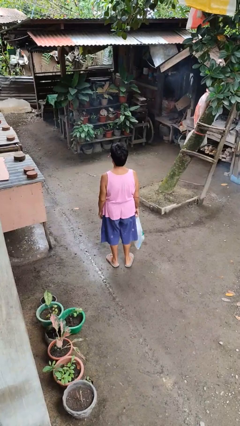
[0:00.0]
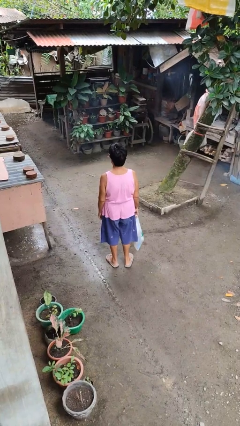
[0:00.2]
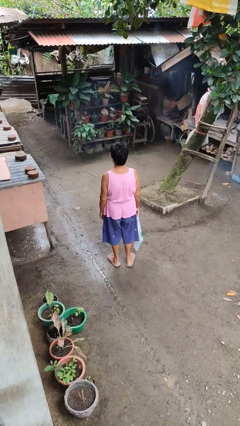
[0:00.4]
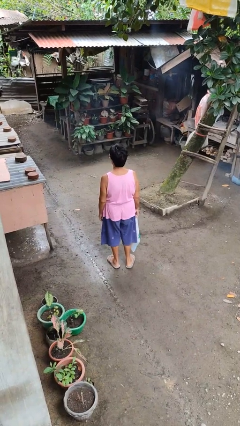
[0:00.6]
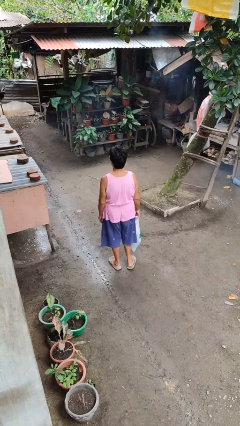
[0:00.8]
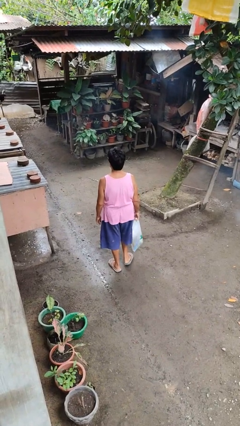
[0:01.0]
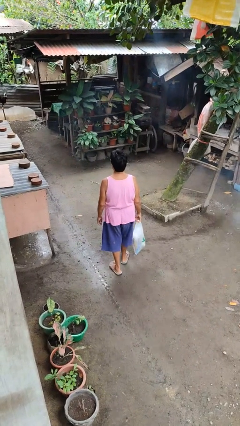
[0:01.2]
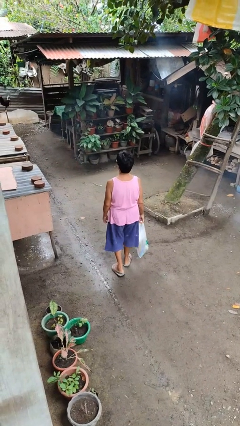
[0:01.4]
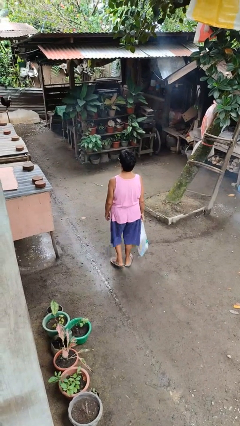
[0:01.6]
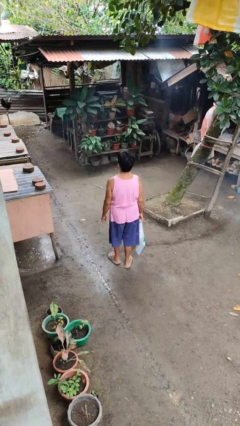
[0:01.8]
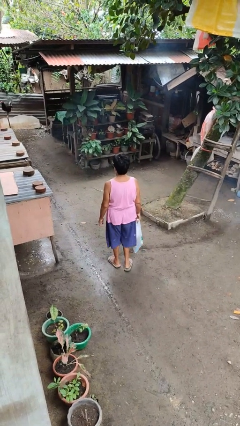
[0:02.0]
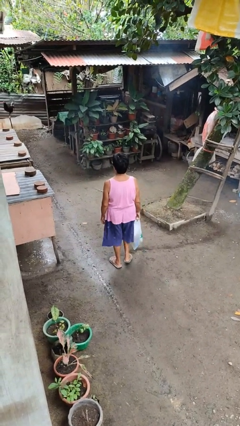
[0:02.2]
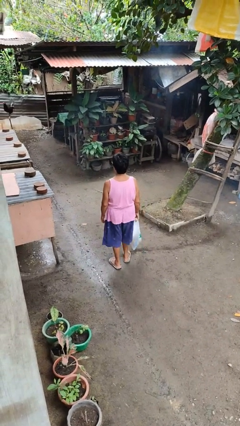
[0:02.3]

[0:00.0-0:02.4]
person carries groceries

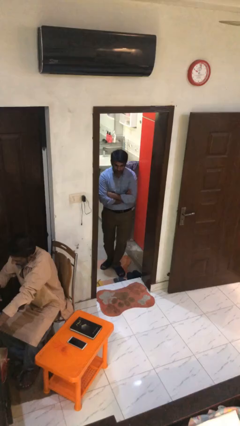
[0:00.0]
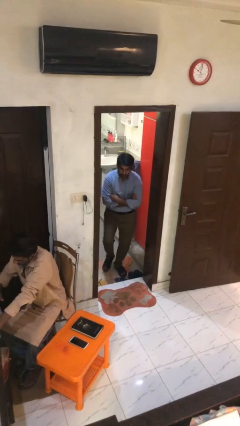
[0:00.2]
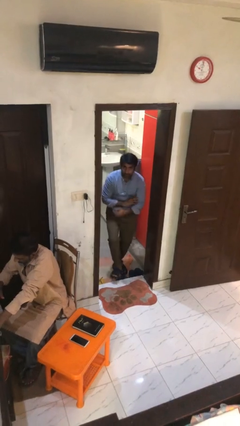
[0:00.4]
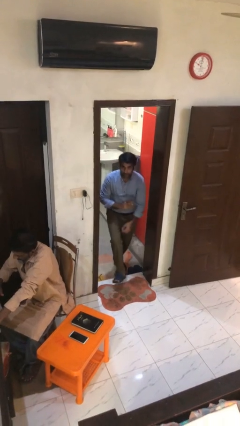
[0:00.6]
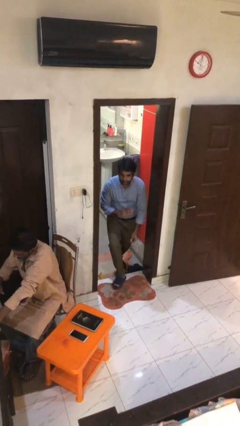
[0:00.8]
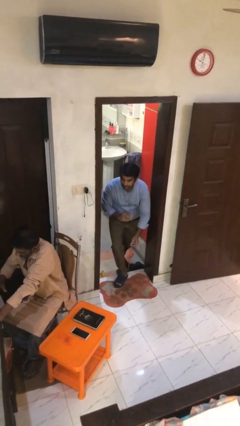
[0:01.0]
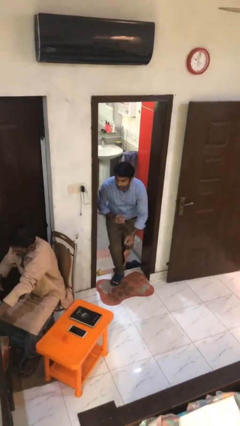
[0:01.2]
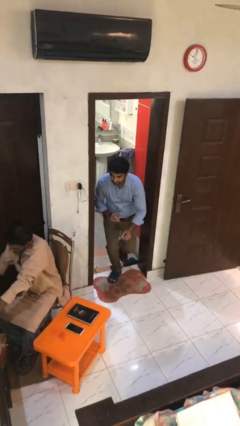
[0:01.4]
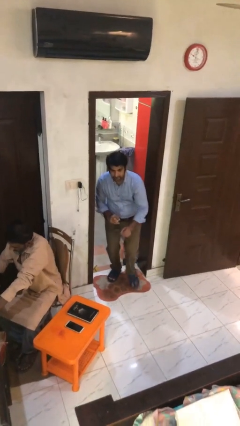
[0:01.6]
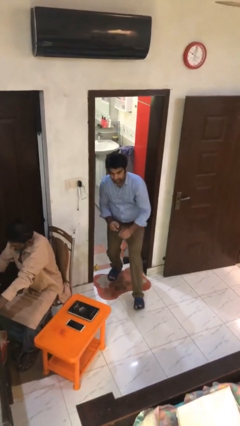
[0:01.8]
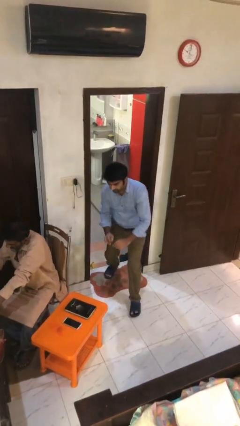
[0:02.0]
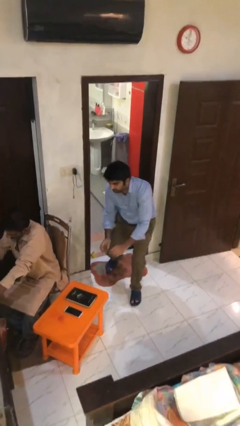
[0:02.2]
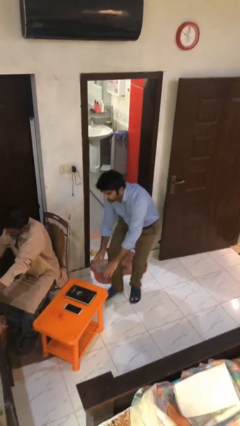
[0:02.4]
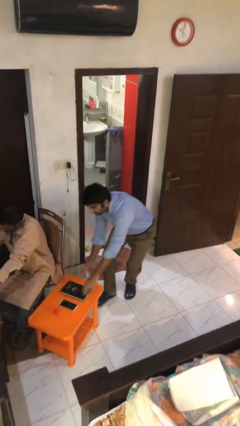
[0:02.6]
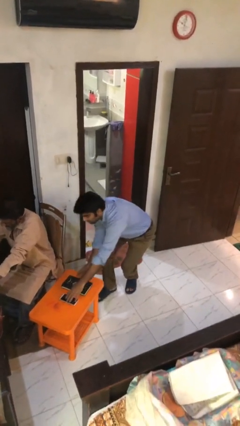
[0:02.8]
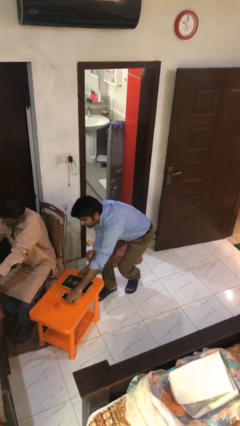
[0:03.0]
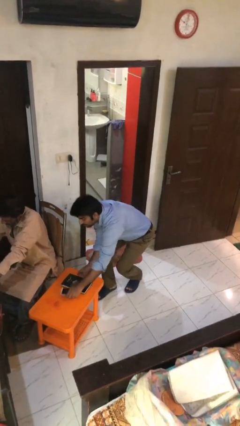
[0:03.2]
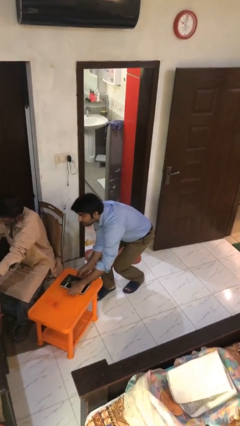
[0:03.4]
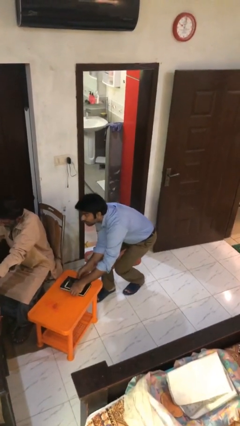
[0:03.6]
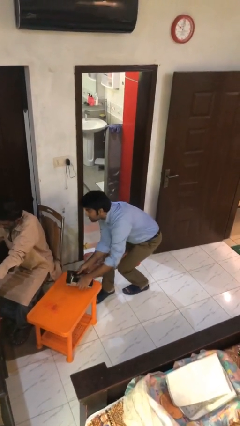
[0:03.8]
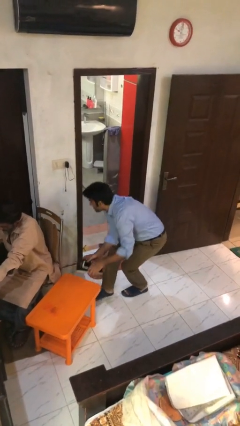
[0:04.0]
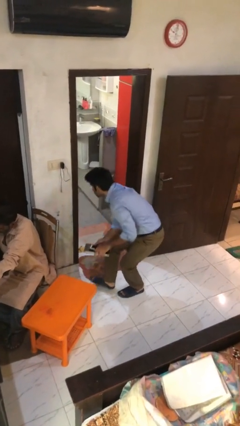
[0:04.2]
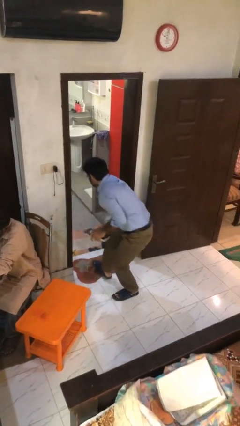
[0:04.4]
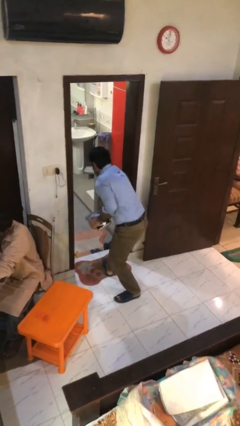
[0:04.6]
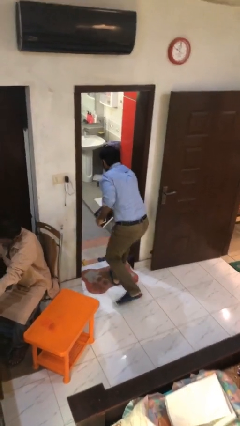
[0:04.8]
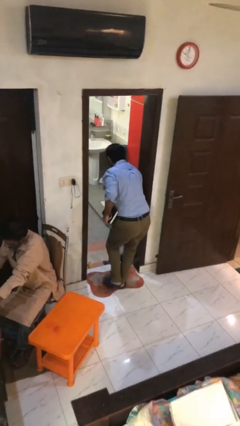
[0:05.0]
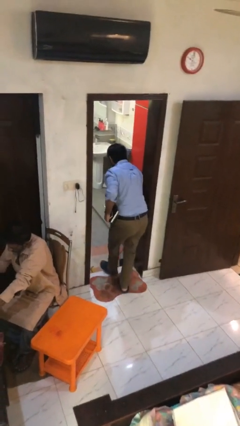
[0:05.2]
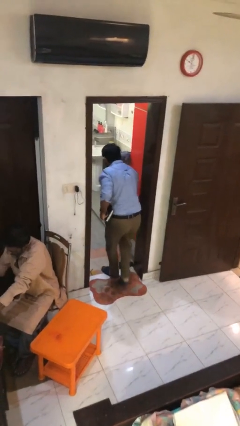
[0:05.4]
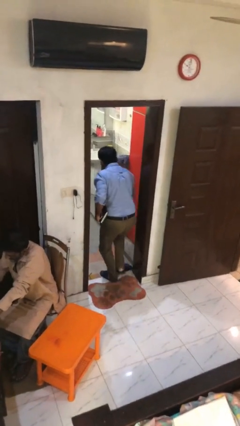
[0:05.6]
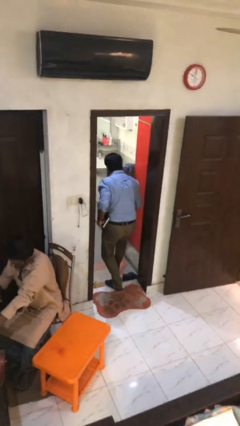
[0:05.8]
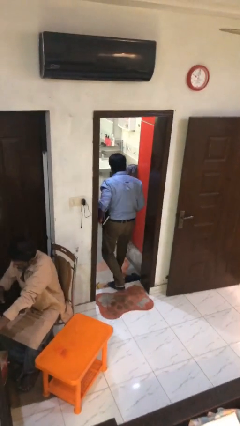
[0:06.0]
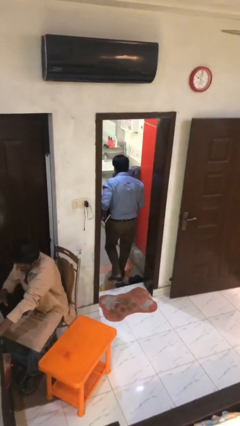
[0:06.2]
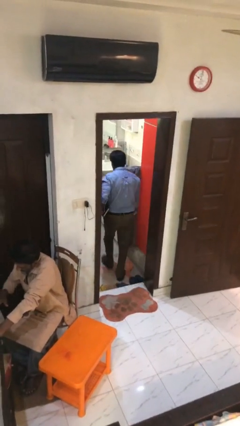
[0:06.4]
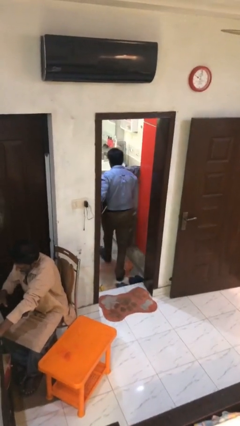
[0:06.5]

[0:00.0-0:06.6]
person steals object from person

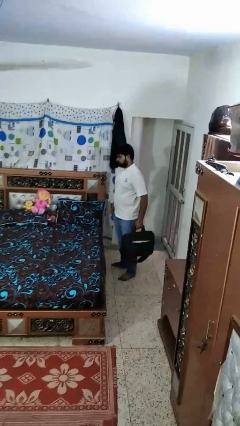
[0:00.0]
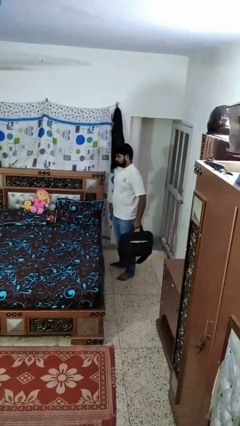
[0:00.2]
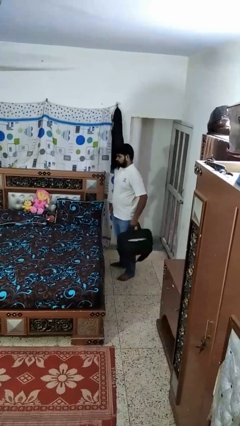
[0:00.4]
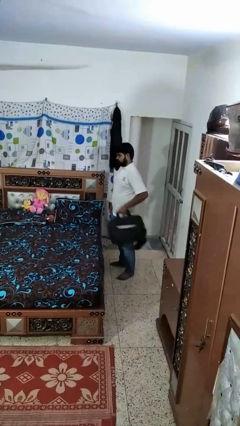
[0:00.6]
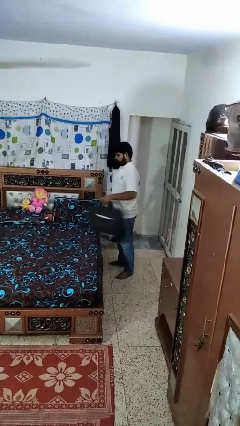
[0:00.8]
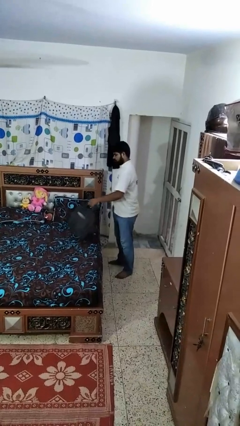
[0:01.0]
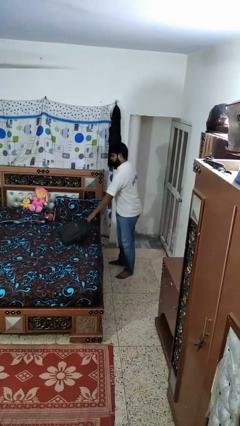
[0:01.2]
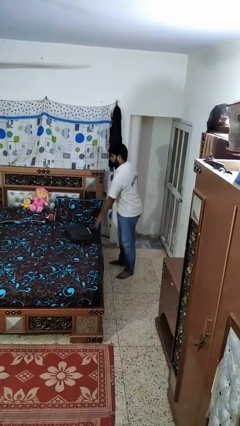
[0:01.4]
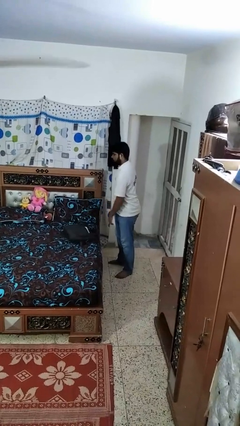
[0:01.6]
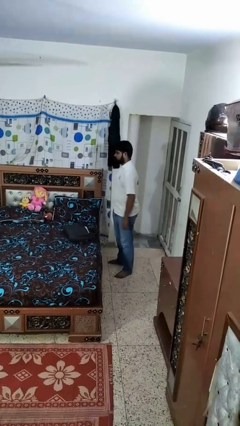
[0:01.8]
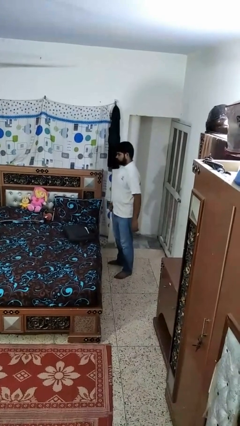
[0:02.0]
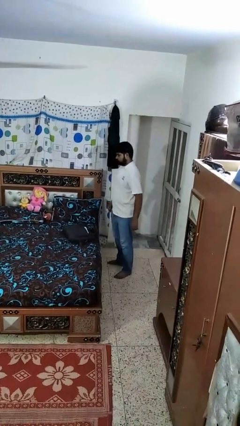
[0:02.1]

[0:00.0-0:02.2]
person puts down object on bed

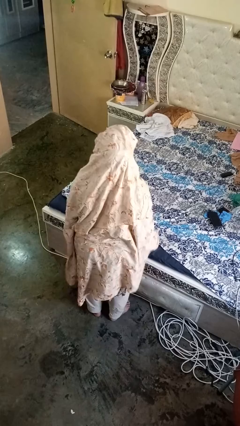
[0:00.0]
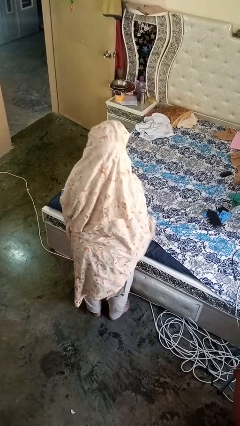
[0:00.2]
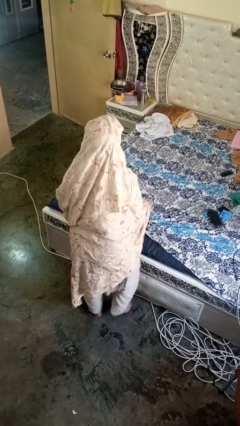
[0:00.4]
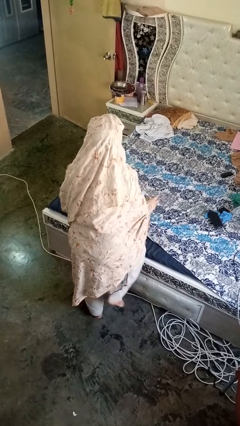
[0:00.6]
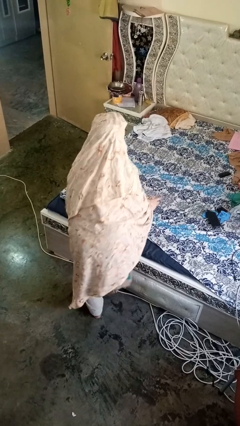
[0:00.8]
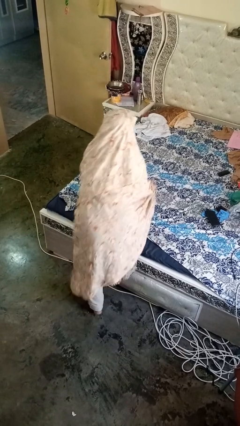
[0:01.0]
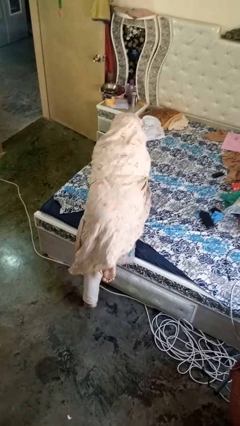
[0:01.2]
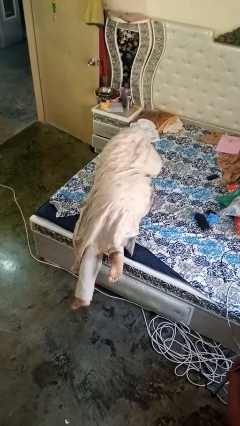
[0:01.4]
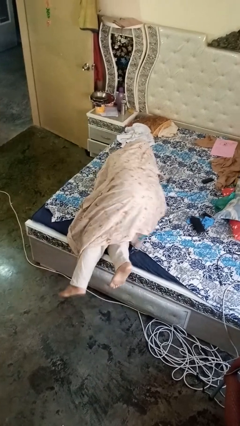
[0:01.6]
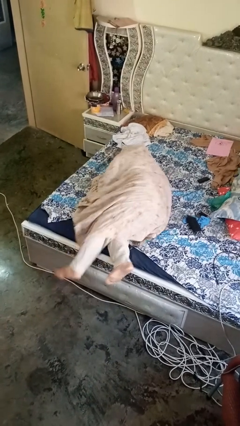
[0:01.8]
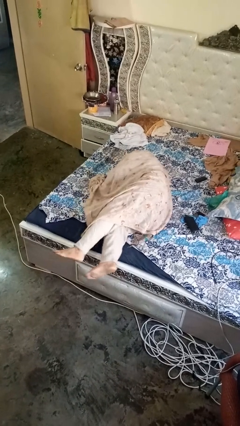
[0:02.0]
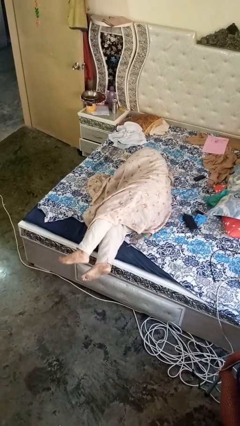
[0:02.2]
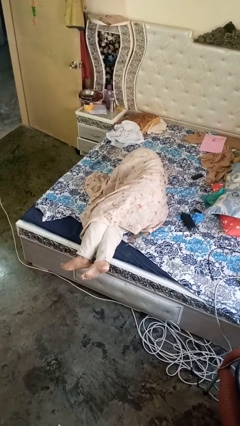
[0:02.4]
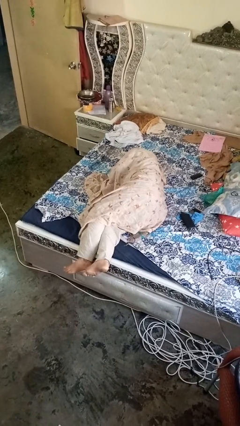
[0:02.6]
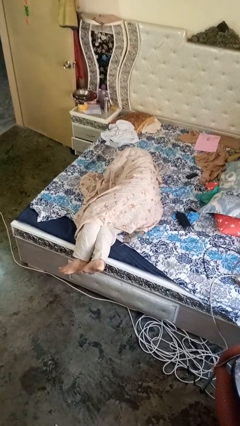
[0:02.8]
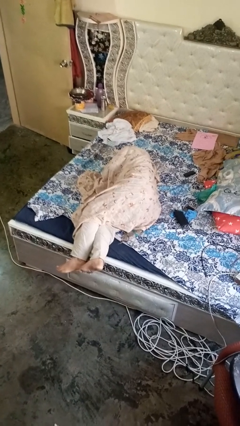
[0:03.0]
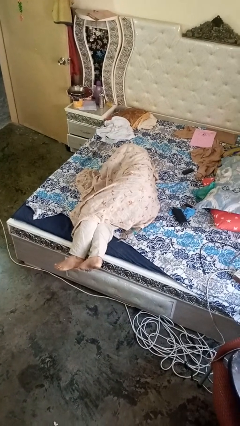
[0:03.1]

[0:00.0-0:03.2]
person lies down on bed

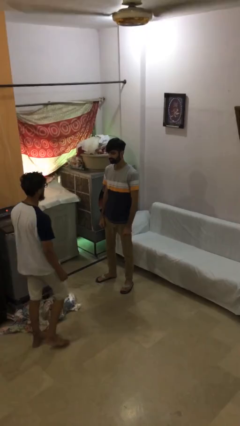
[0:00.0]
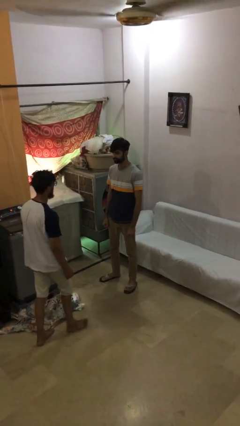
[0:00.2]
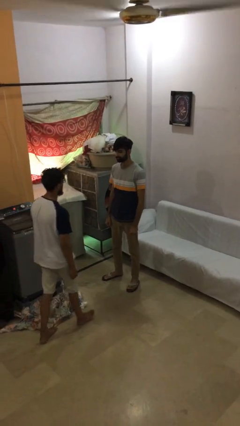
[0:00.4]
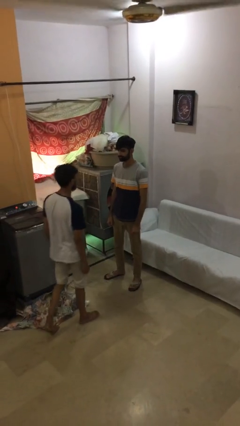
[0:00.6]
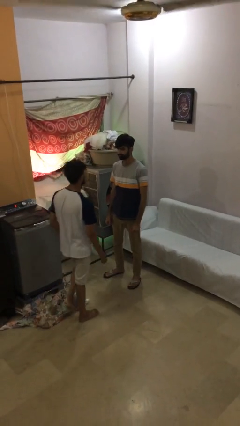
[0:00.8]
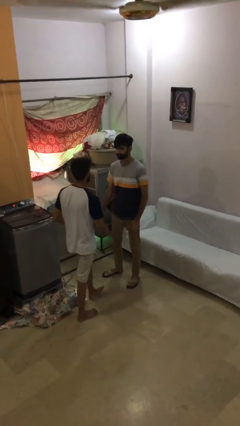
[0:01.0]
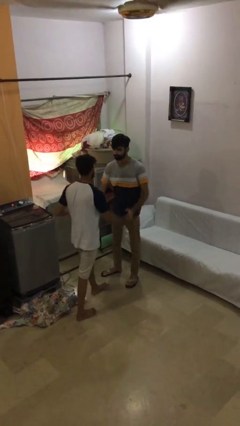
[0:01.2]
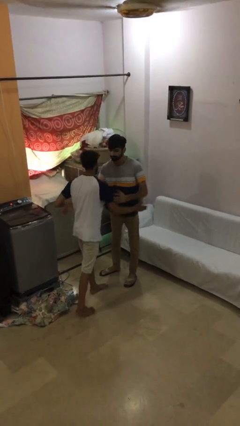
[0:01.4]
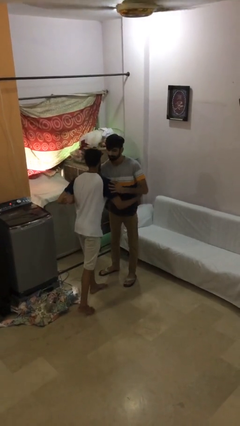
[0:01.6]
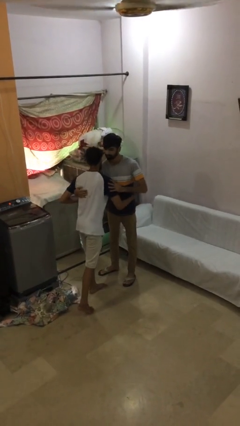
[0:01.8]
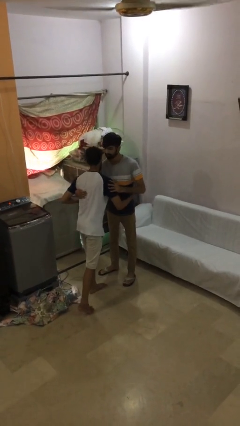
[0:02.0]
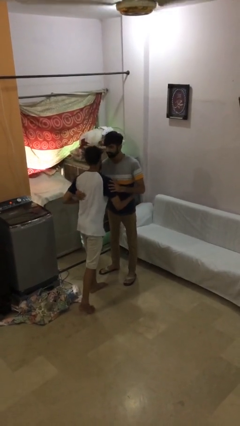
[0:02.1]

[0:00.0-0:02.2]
person embraces person

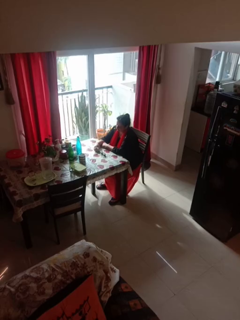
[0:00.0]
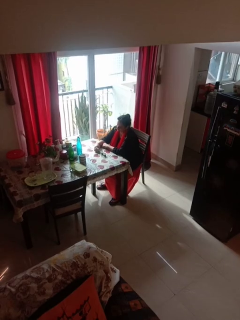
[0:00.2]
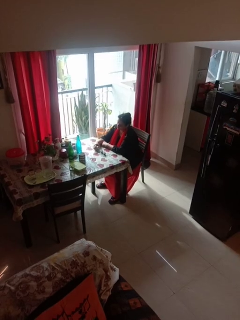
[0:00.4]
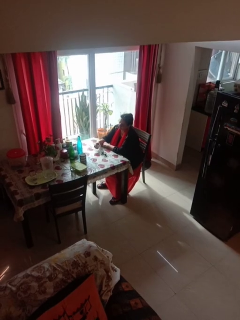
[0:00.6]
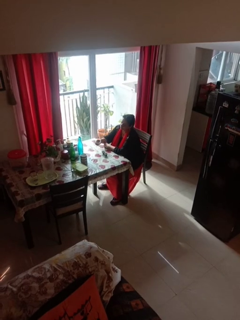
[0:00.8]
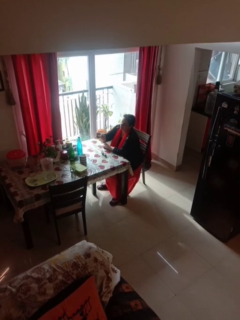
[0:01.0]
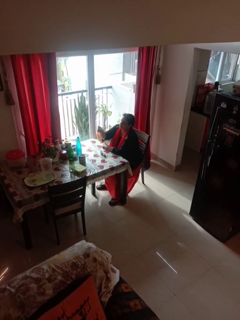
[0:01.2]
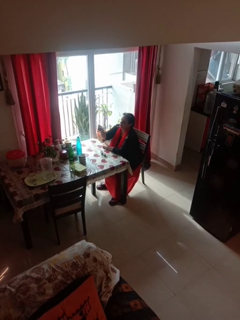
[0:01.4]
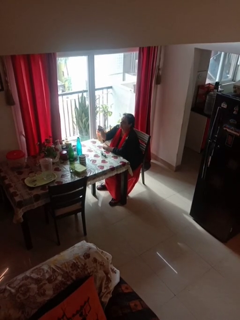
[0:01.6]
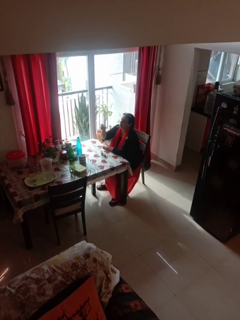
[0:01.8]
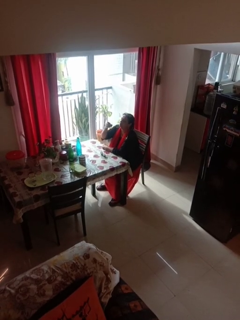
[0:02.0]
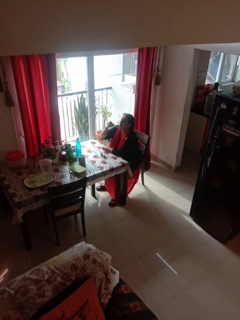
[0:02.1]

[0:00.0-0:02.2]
person picks up object from table
